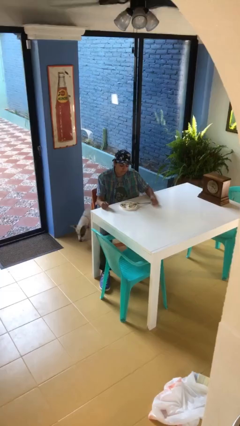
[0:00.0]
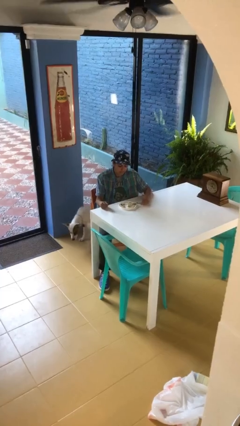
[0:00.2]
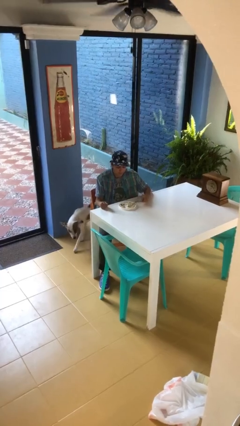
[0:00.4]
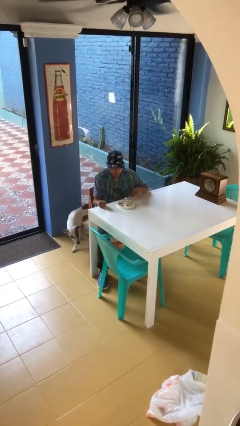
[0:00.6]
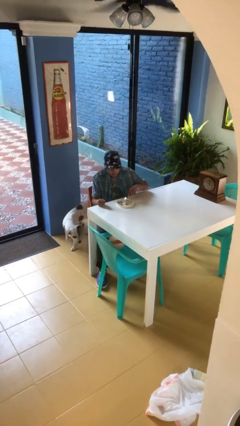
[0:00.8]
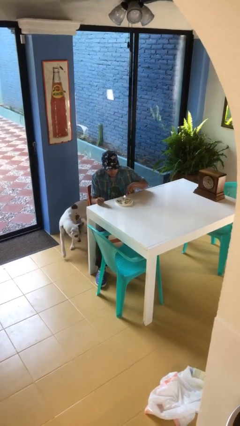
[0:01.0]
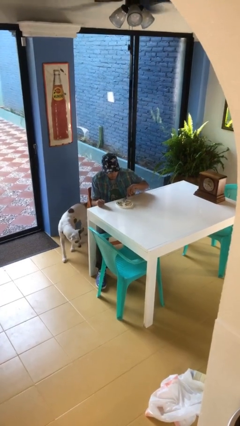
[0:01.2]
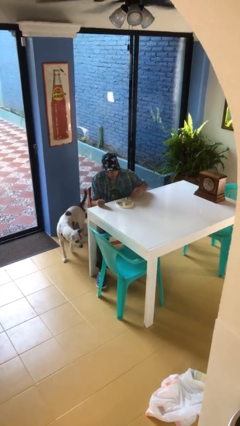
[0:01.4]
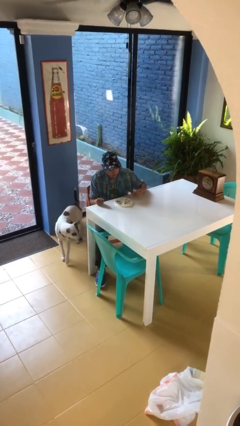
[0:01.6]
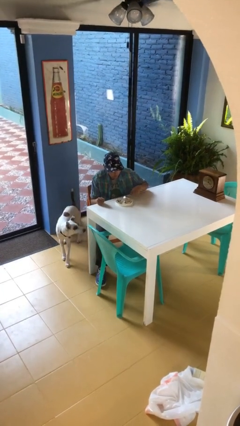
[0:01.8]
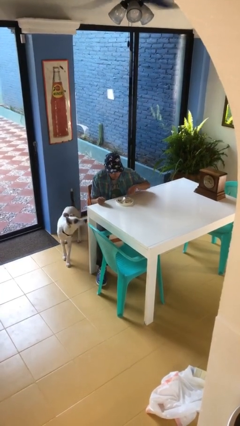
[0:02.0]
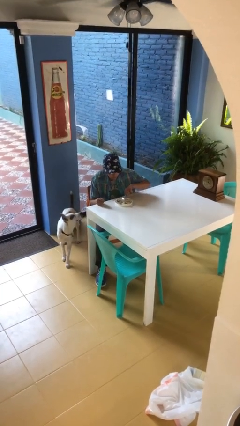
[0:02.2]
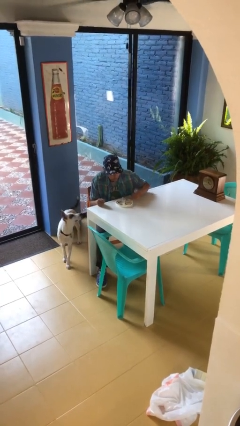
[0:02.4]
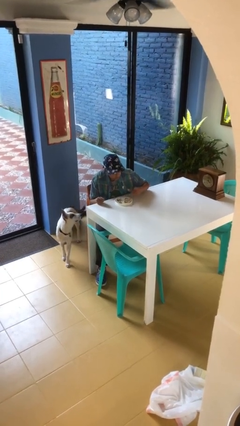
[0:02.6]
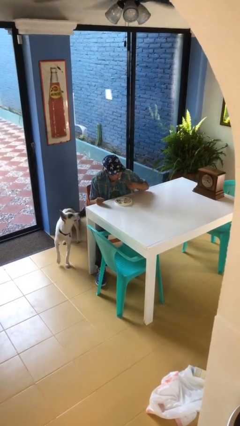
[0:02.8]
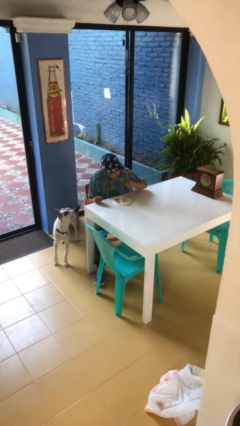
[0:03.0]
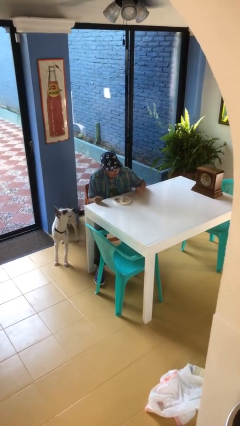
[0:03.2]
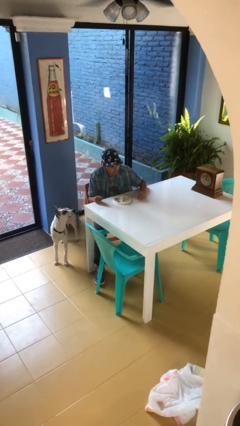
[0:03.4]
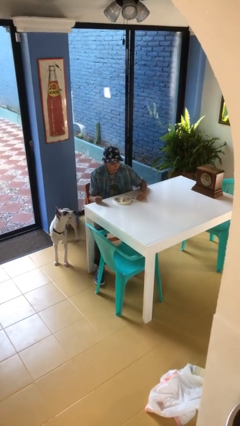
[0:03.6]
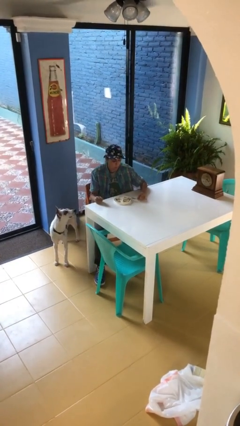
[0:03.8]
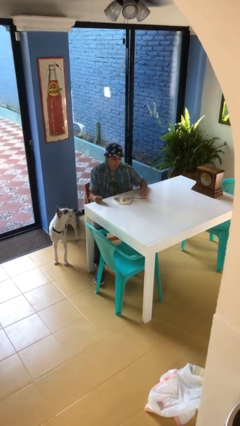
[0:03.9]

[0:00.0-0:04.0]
person eats with utensil

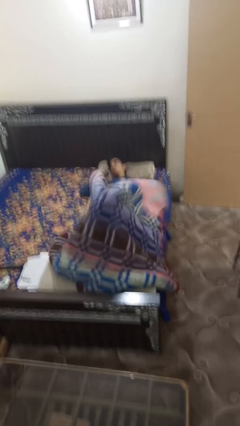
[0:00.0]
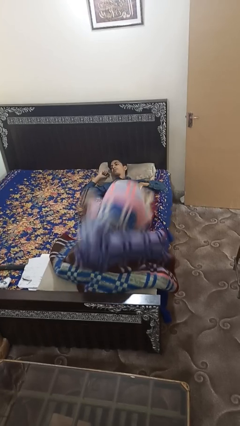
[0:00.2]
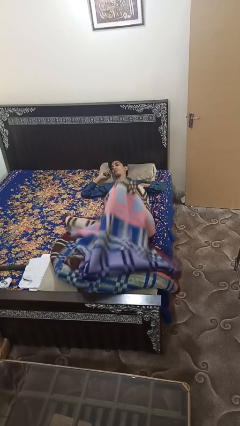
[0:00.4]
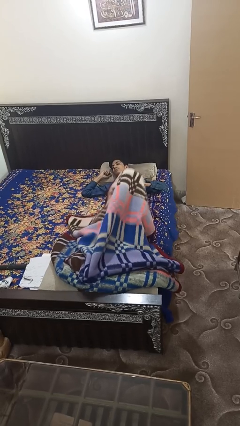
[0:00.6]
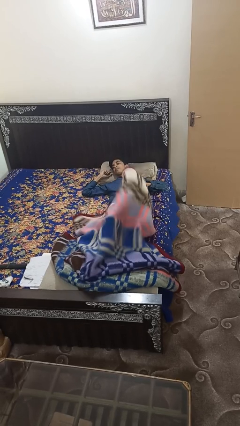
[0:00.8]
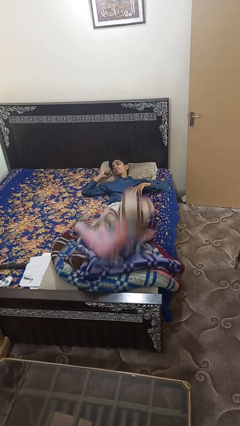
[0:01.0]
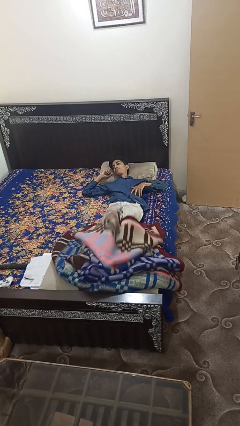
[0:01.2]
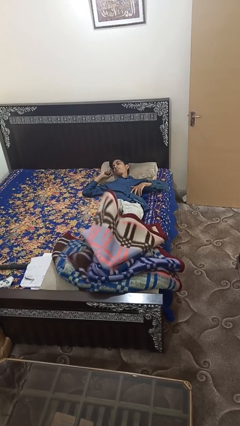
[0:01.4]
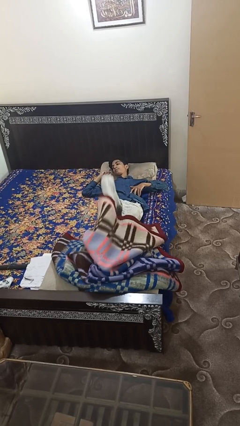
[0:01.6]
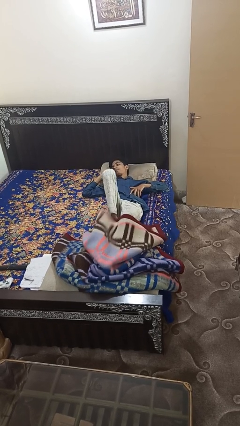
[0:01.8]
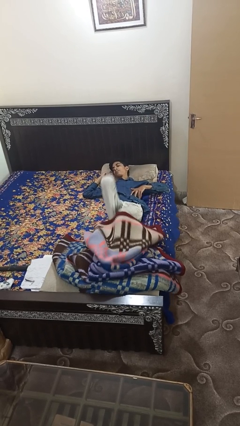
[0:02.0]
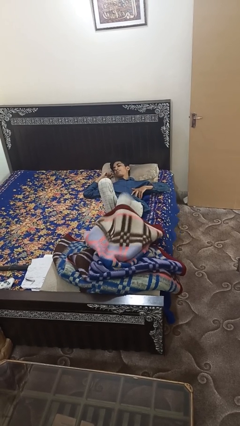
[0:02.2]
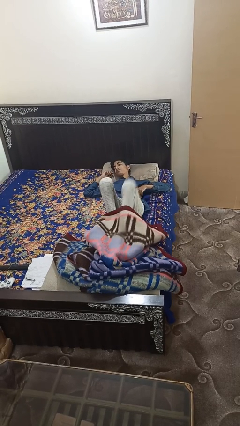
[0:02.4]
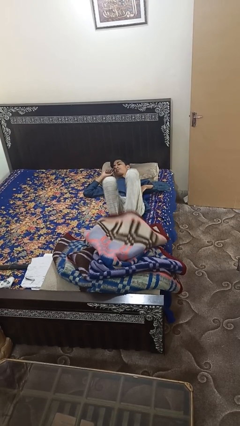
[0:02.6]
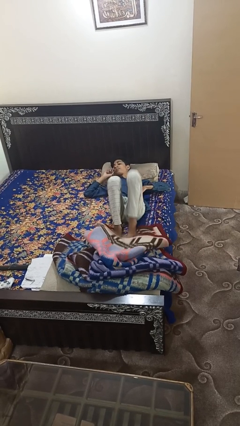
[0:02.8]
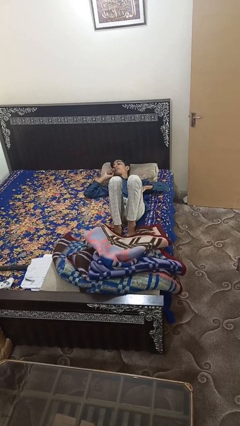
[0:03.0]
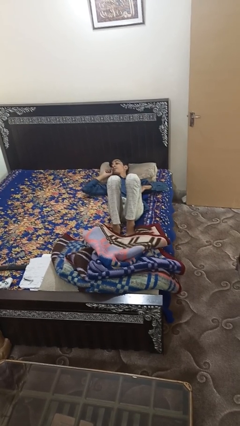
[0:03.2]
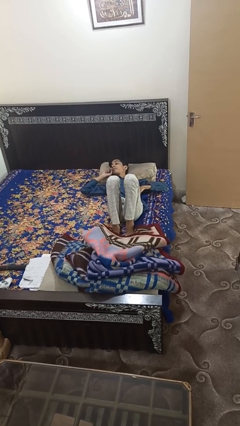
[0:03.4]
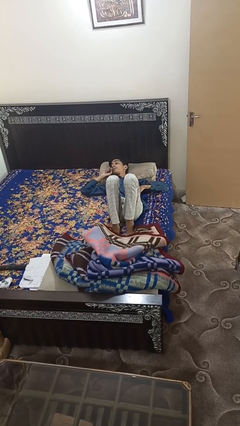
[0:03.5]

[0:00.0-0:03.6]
person uncovers with bedsheets

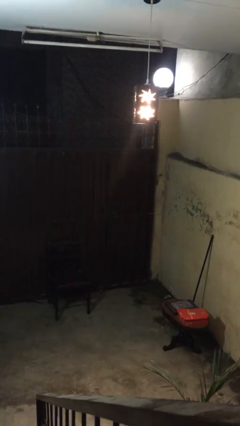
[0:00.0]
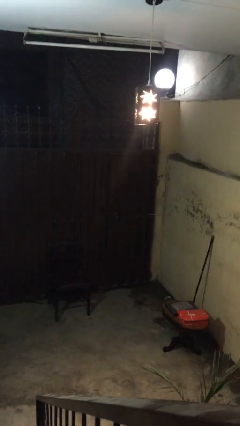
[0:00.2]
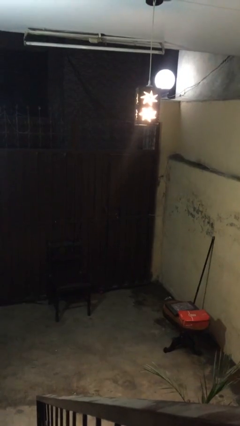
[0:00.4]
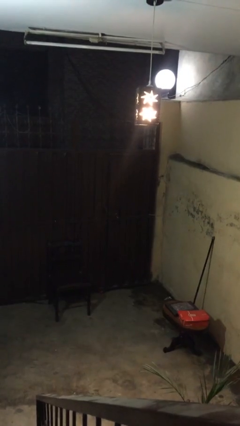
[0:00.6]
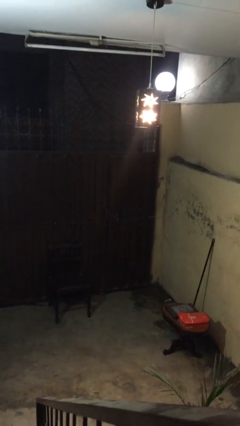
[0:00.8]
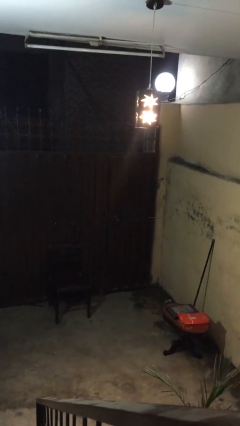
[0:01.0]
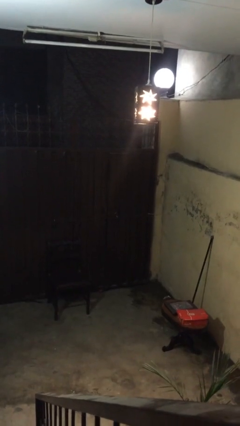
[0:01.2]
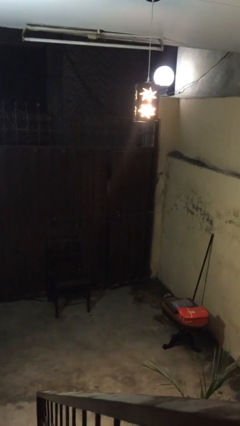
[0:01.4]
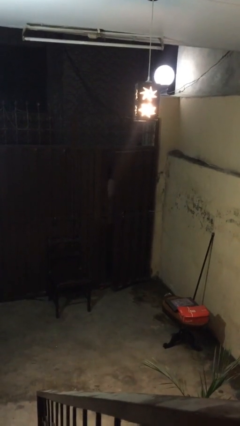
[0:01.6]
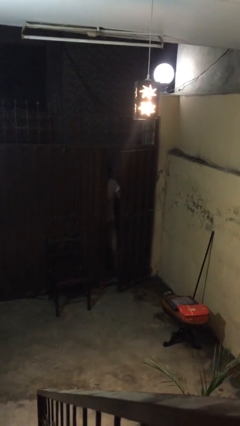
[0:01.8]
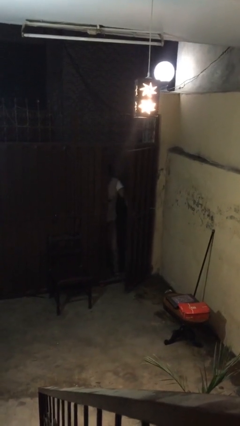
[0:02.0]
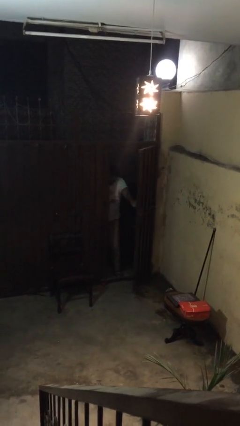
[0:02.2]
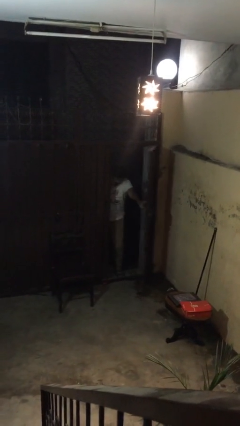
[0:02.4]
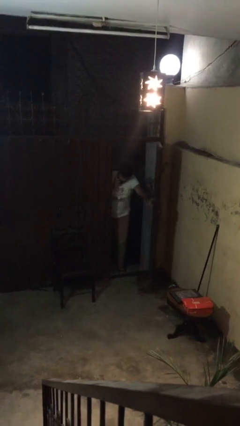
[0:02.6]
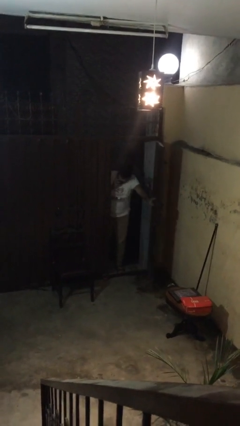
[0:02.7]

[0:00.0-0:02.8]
person opens facility door

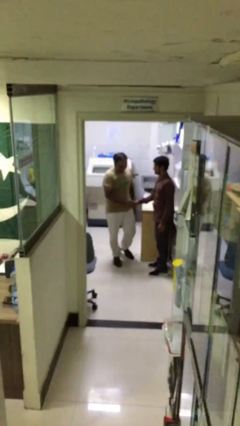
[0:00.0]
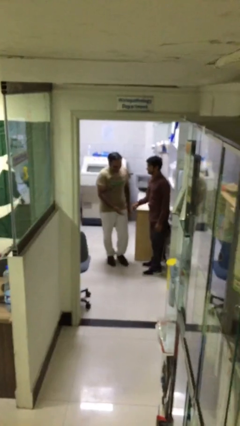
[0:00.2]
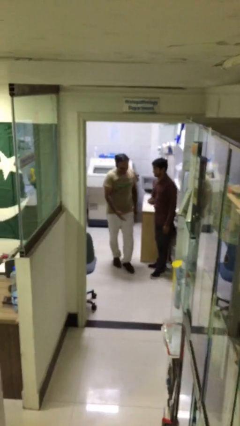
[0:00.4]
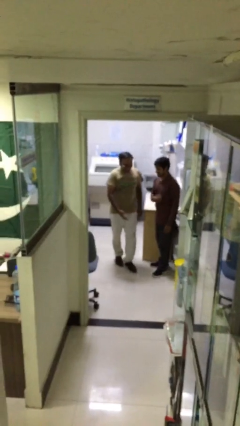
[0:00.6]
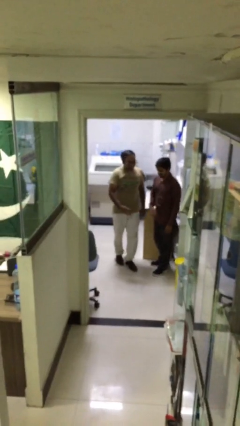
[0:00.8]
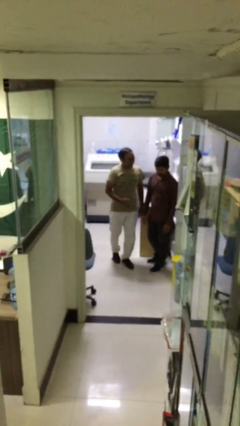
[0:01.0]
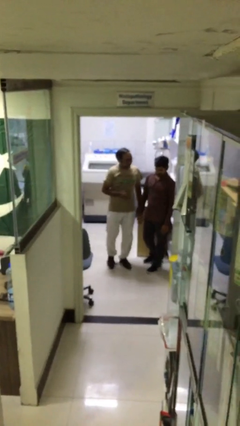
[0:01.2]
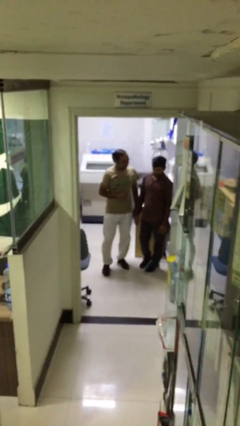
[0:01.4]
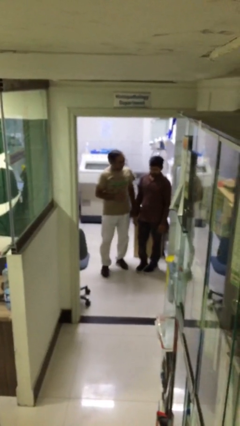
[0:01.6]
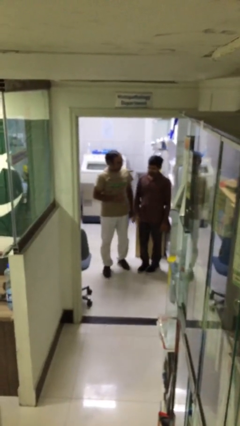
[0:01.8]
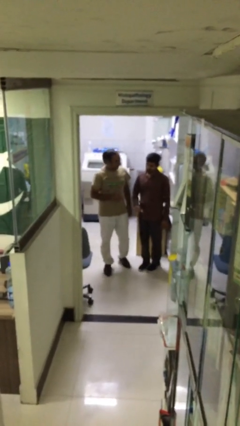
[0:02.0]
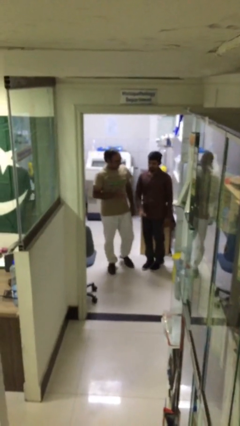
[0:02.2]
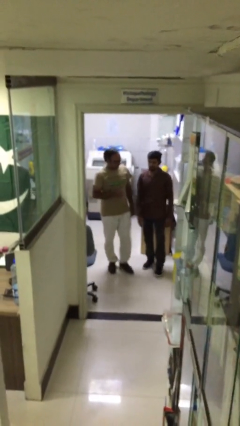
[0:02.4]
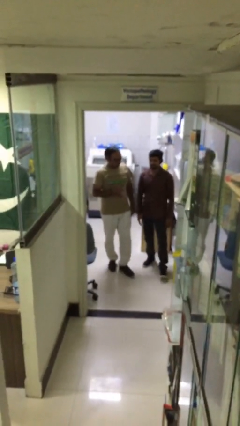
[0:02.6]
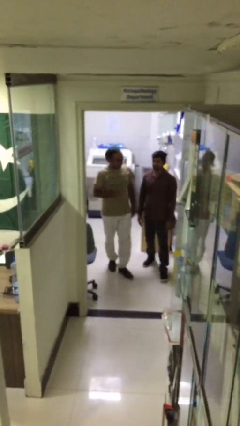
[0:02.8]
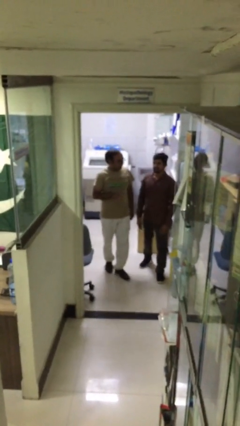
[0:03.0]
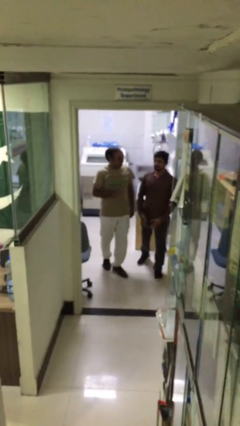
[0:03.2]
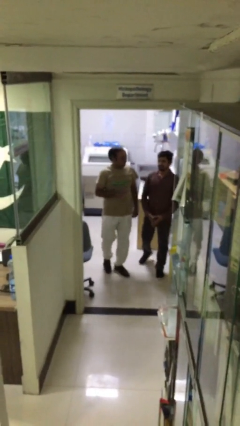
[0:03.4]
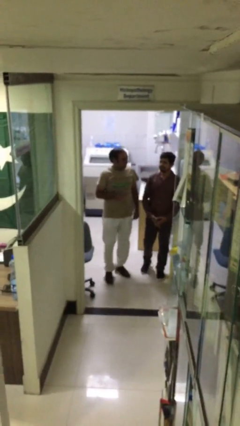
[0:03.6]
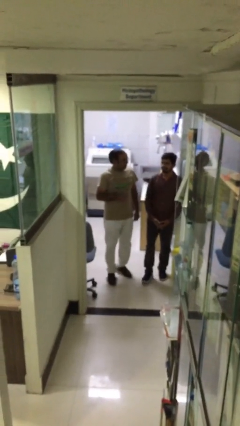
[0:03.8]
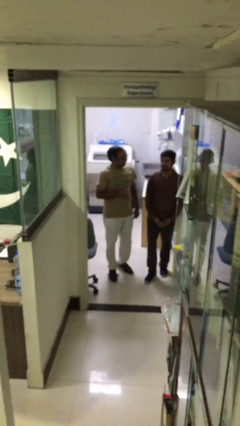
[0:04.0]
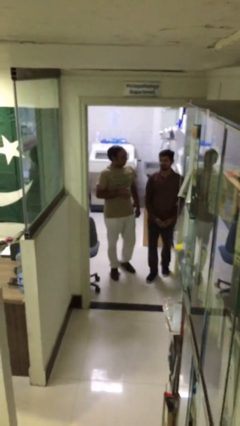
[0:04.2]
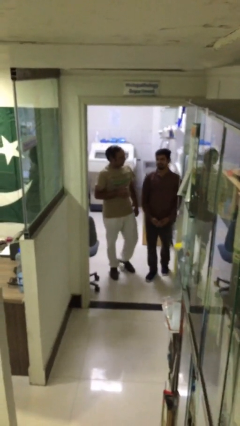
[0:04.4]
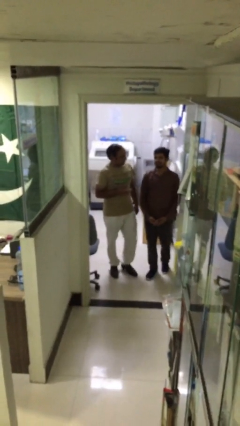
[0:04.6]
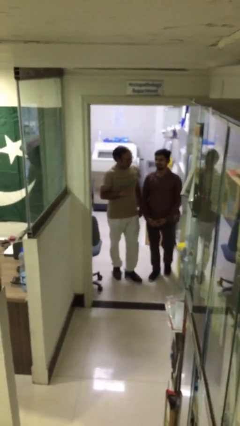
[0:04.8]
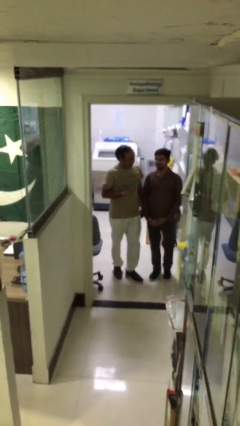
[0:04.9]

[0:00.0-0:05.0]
person talks to person

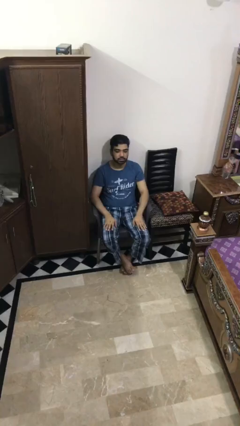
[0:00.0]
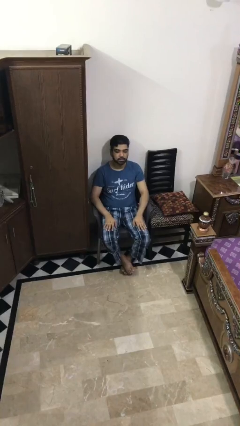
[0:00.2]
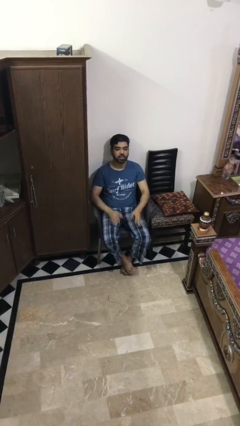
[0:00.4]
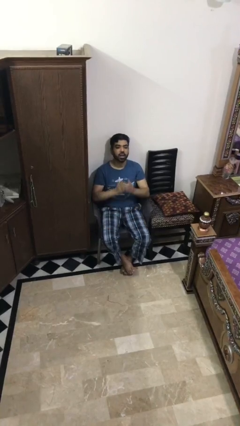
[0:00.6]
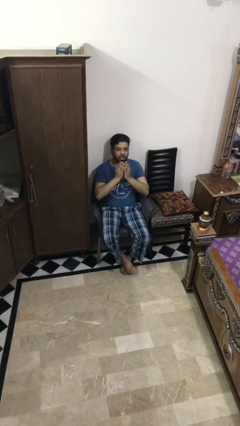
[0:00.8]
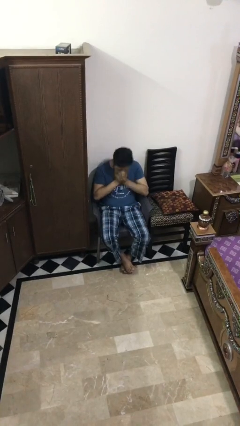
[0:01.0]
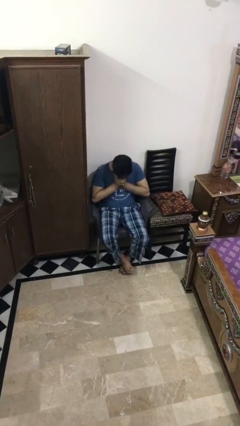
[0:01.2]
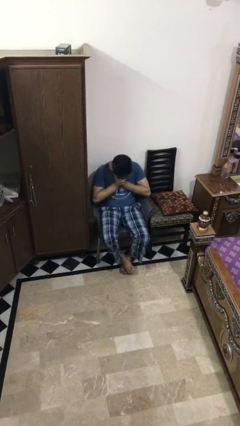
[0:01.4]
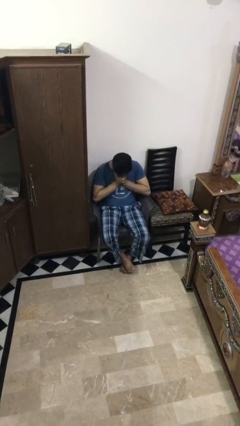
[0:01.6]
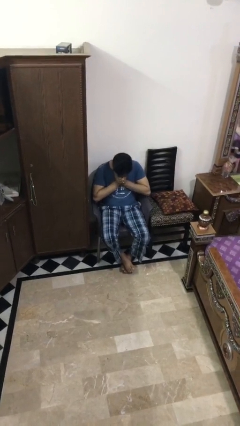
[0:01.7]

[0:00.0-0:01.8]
person sneezes into hand

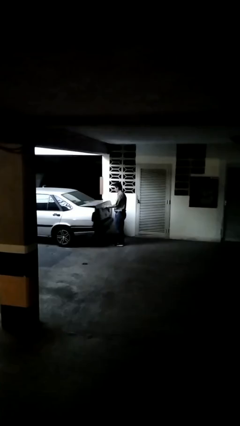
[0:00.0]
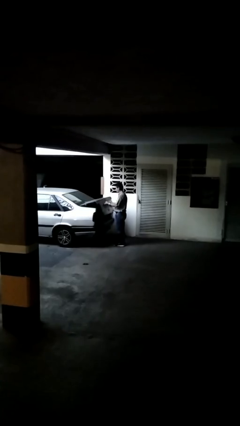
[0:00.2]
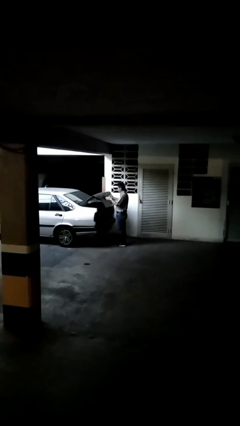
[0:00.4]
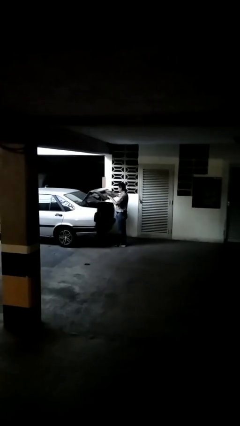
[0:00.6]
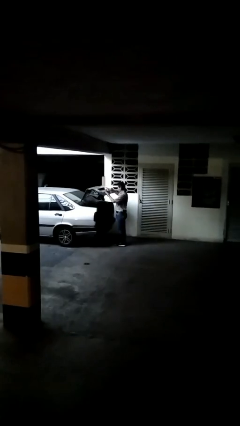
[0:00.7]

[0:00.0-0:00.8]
person opens car trunk
